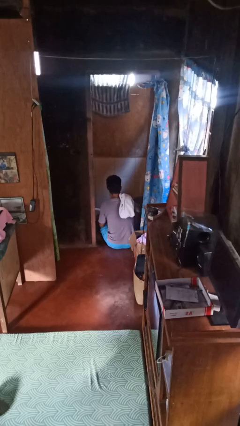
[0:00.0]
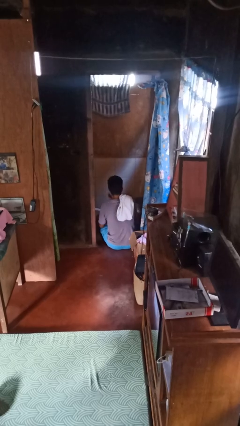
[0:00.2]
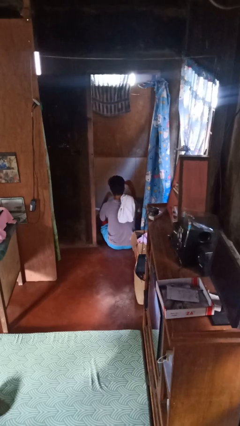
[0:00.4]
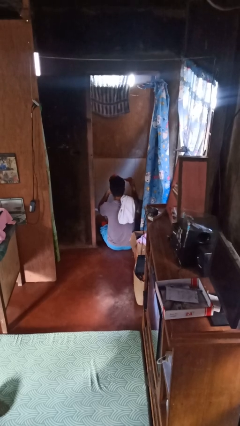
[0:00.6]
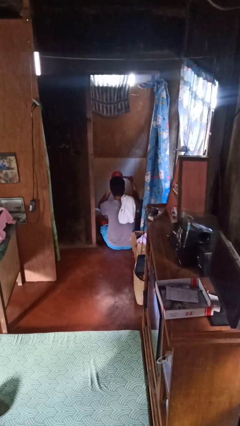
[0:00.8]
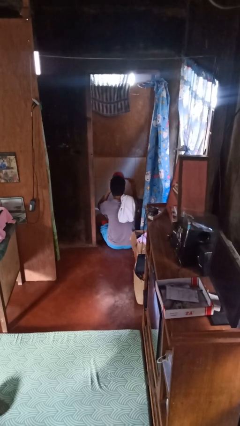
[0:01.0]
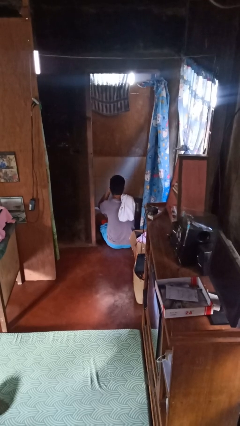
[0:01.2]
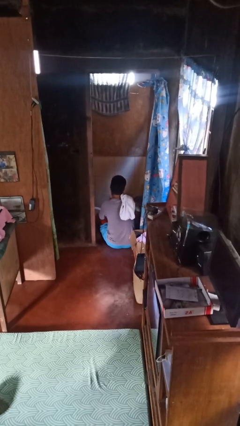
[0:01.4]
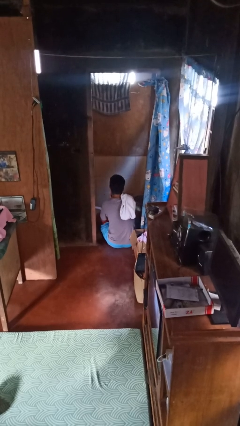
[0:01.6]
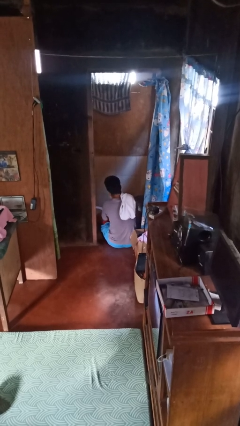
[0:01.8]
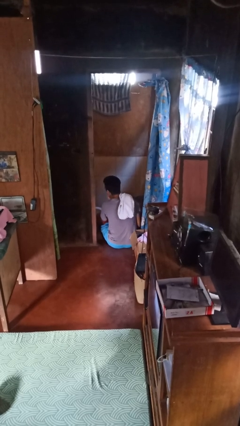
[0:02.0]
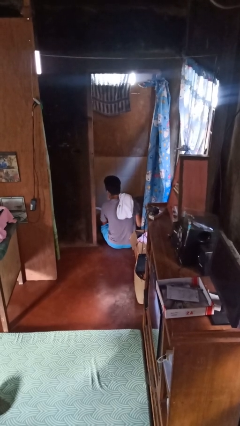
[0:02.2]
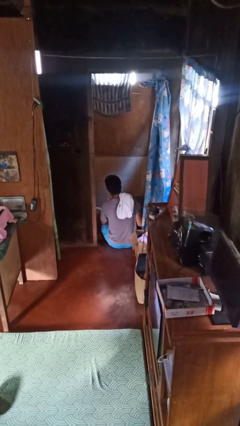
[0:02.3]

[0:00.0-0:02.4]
person washes face

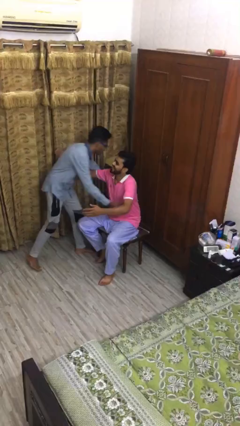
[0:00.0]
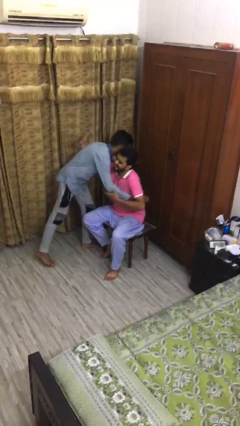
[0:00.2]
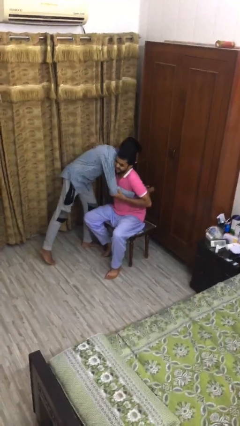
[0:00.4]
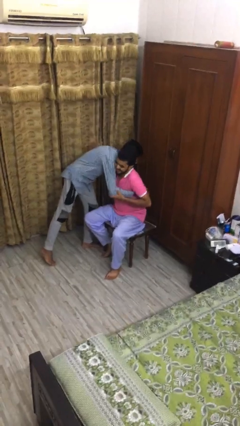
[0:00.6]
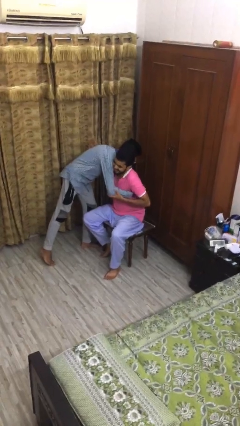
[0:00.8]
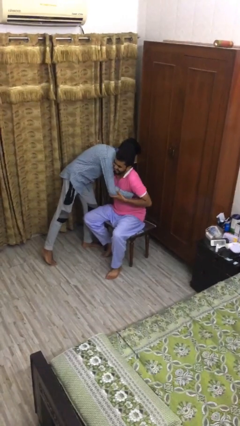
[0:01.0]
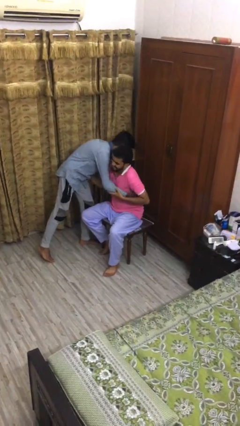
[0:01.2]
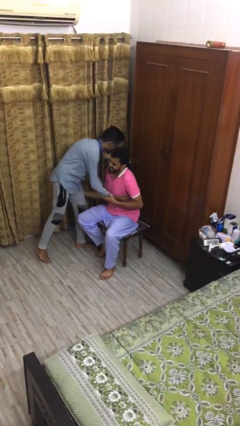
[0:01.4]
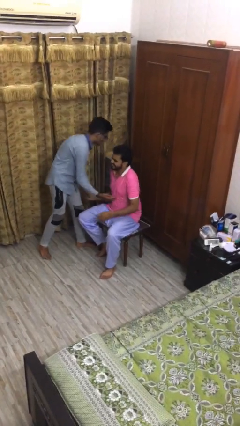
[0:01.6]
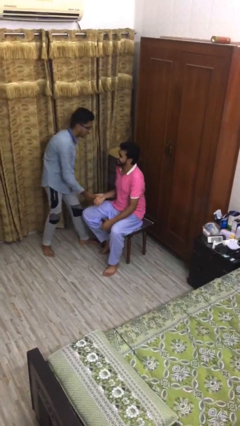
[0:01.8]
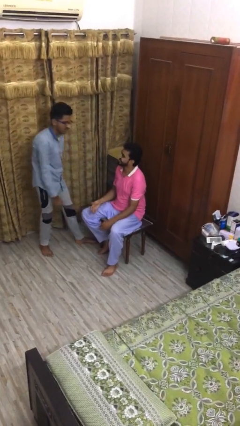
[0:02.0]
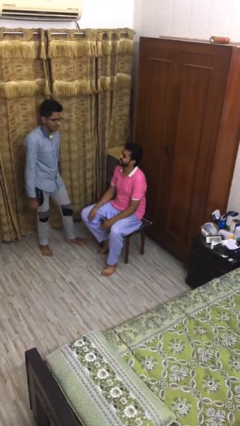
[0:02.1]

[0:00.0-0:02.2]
person embraces person

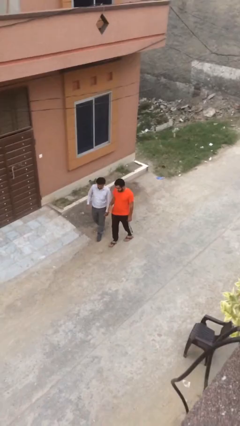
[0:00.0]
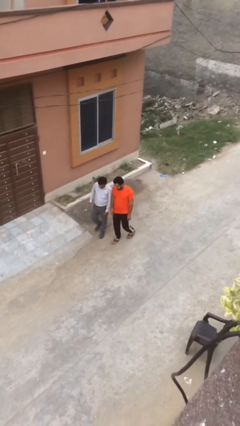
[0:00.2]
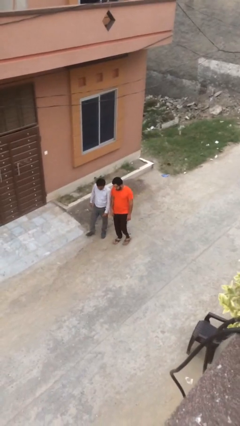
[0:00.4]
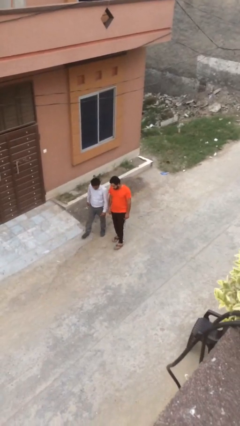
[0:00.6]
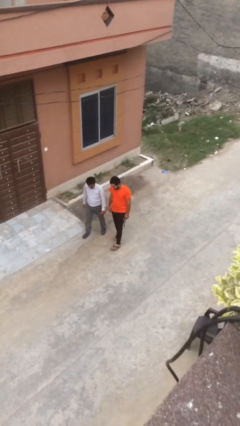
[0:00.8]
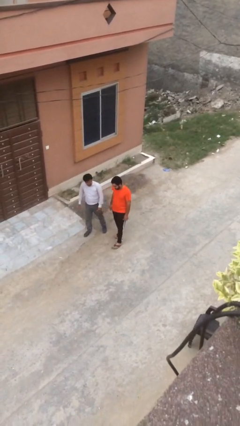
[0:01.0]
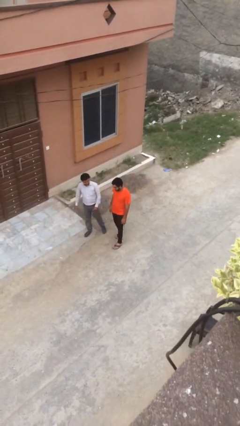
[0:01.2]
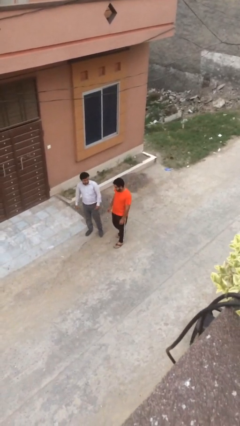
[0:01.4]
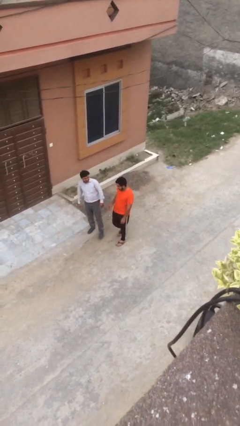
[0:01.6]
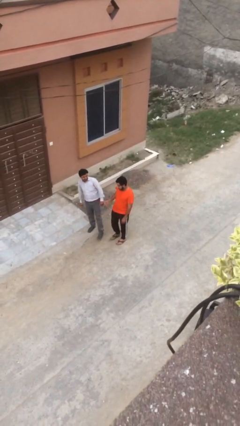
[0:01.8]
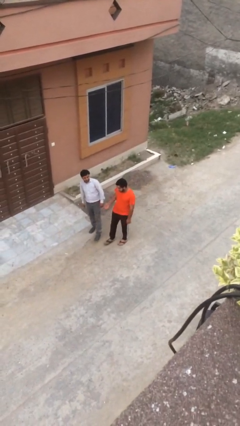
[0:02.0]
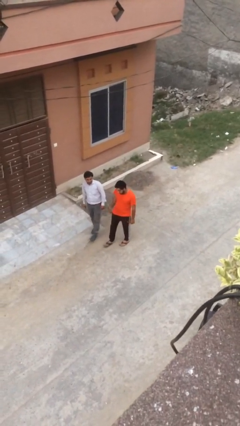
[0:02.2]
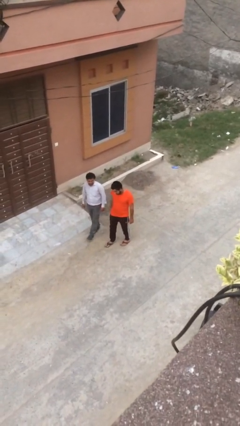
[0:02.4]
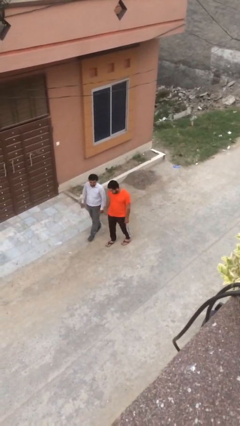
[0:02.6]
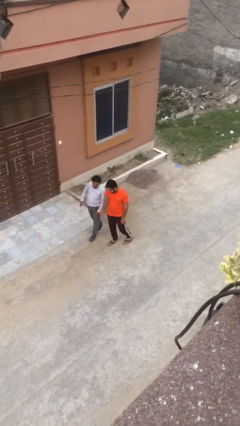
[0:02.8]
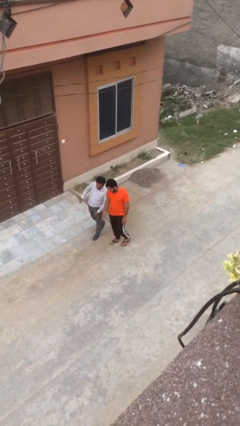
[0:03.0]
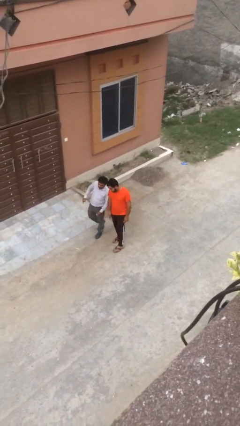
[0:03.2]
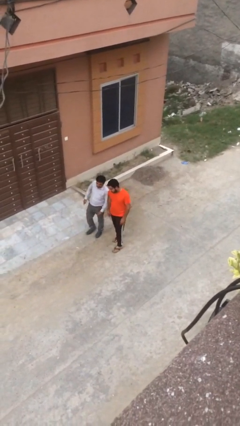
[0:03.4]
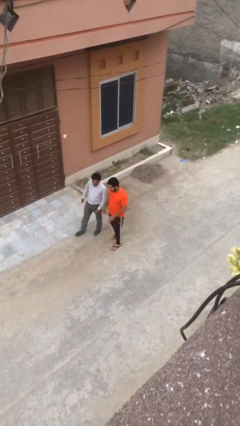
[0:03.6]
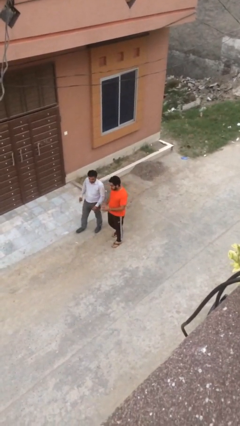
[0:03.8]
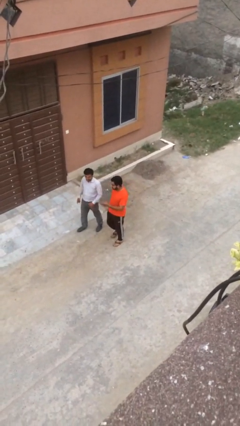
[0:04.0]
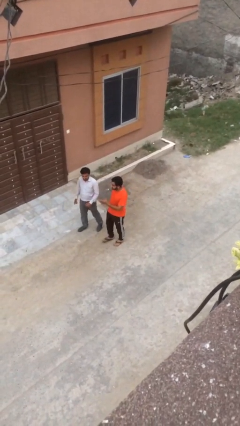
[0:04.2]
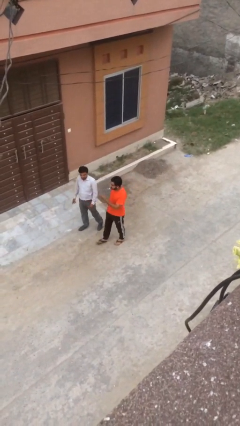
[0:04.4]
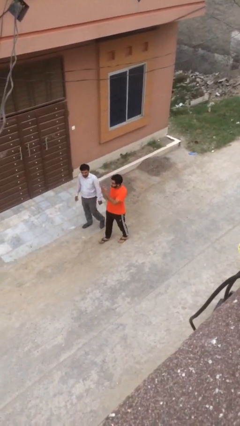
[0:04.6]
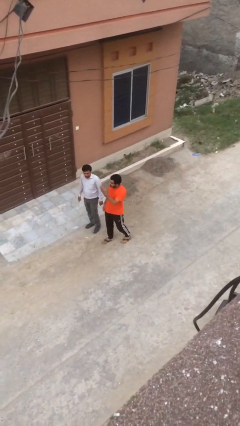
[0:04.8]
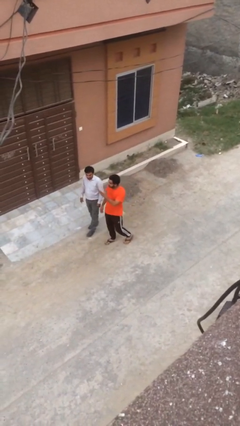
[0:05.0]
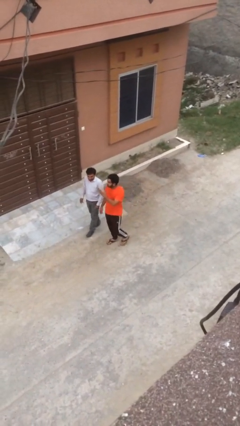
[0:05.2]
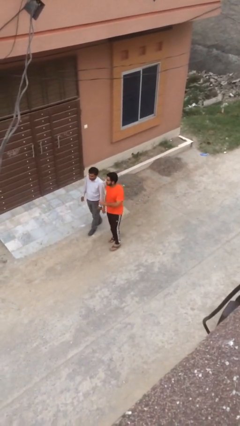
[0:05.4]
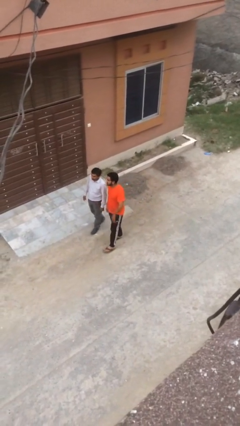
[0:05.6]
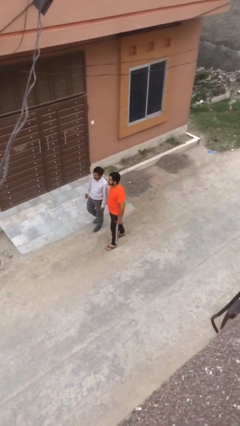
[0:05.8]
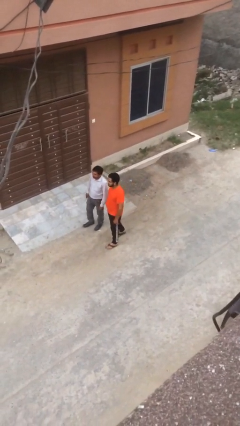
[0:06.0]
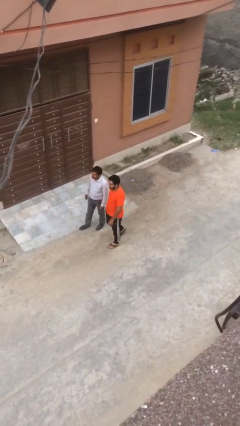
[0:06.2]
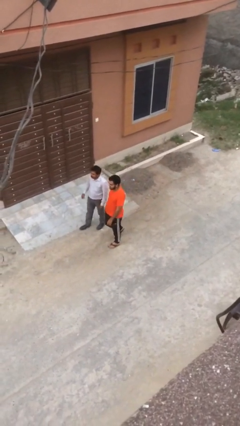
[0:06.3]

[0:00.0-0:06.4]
person talks to person

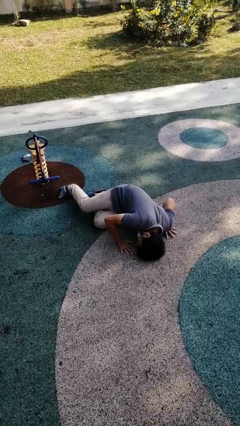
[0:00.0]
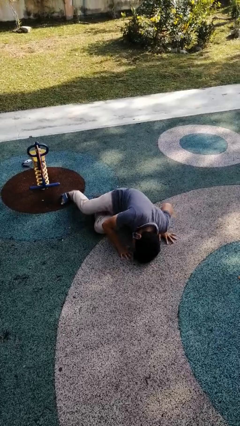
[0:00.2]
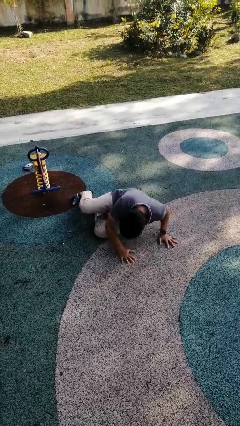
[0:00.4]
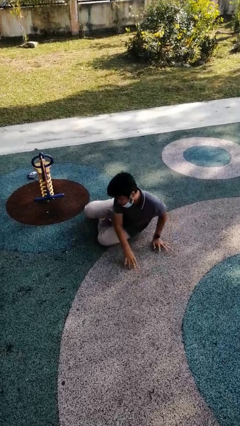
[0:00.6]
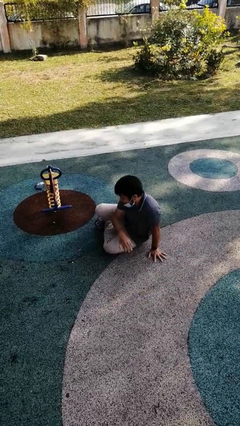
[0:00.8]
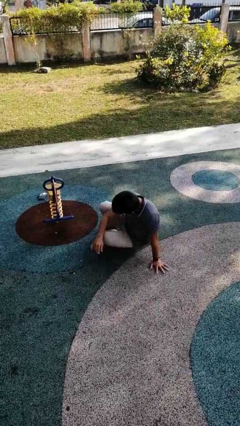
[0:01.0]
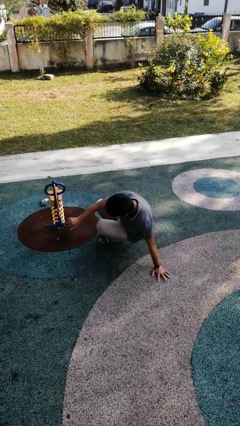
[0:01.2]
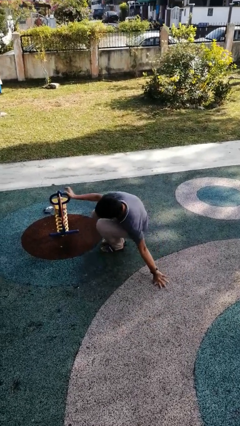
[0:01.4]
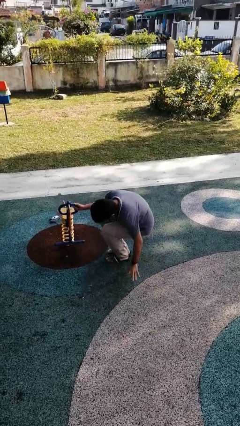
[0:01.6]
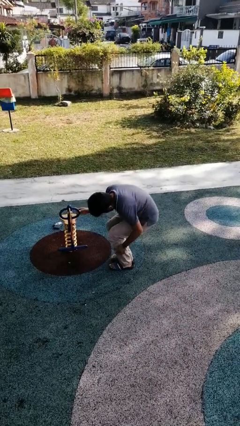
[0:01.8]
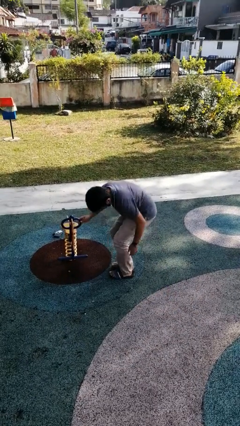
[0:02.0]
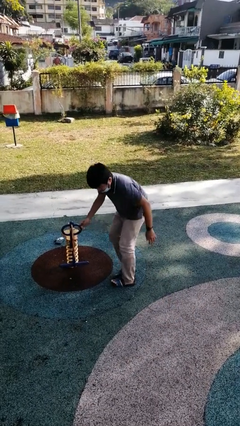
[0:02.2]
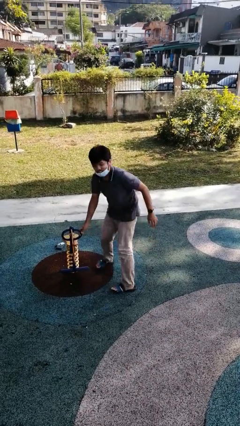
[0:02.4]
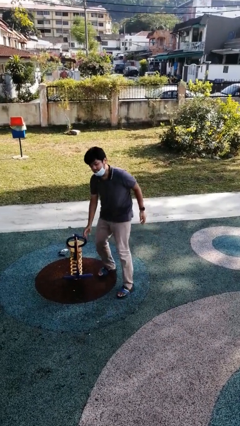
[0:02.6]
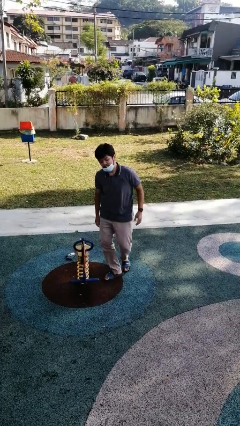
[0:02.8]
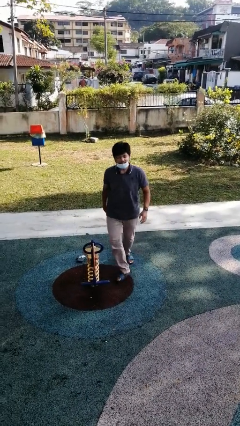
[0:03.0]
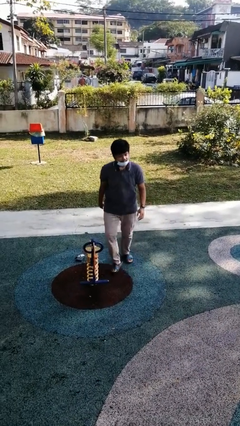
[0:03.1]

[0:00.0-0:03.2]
person stands up from floor

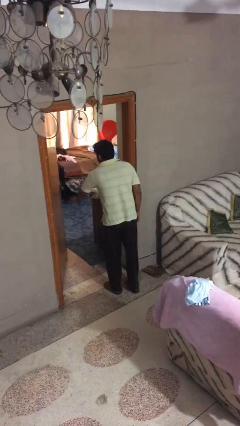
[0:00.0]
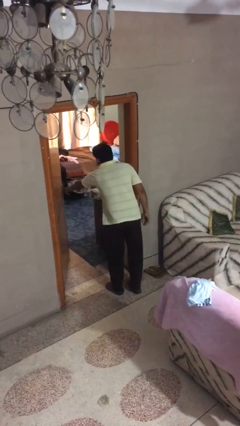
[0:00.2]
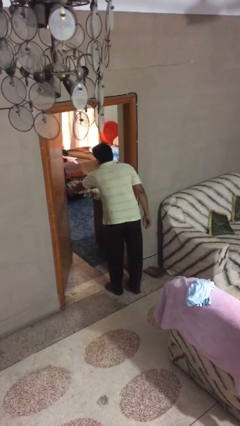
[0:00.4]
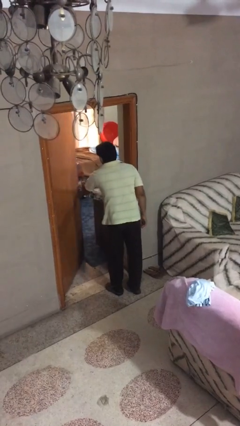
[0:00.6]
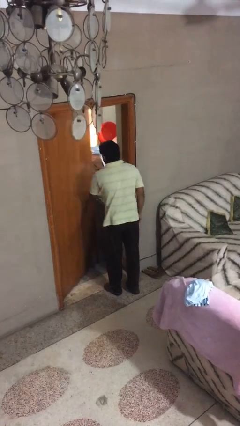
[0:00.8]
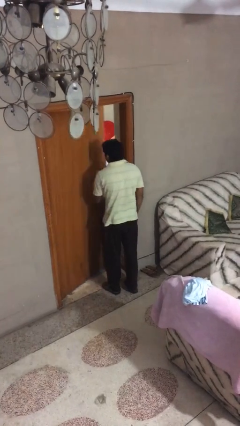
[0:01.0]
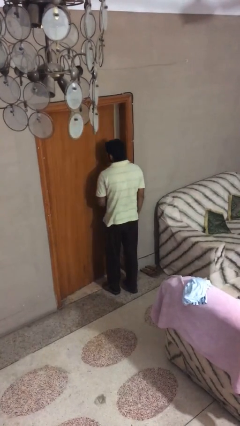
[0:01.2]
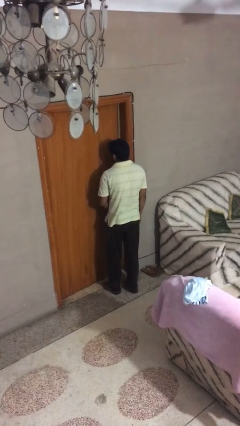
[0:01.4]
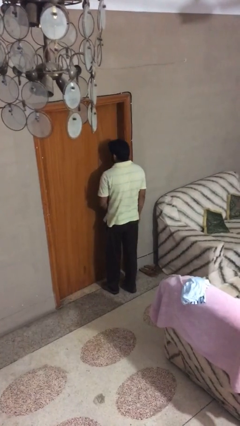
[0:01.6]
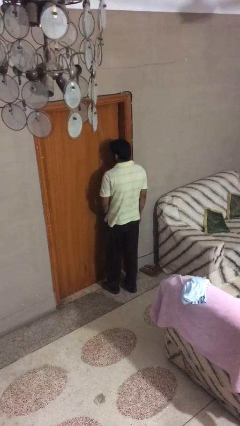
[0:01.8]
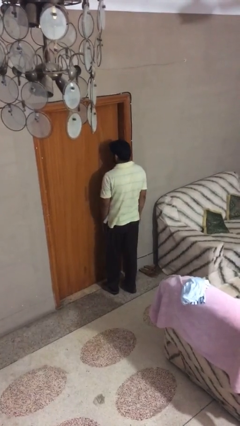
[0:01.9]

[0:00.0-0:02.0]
person closes facility door

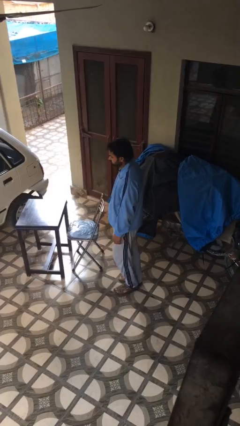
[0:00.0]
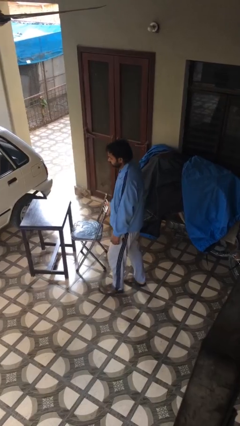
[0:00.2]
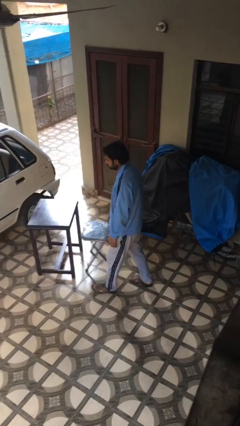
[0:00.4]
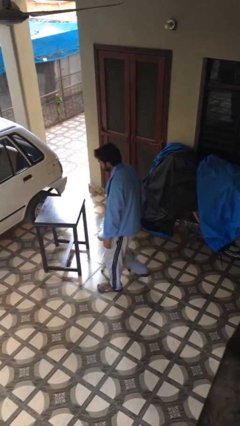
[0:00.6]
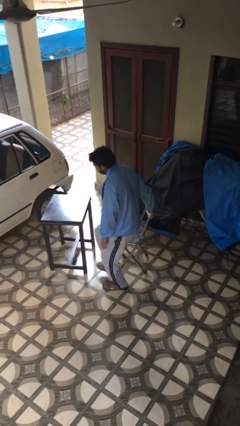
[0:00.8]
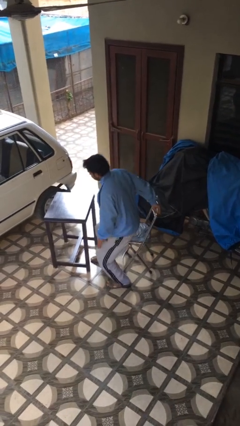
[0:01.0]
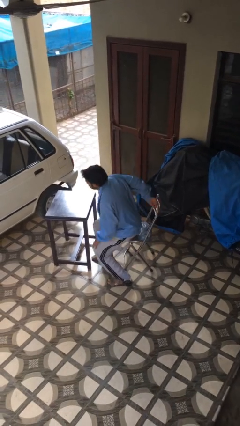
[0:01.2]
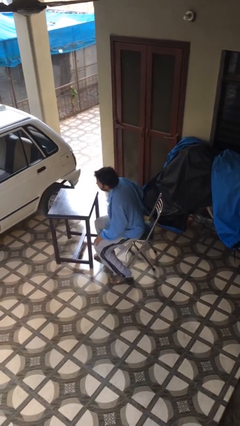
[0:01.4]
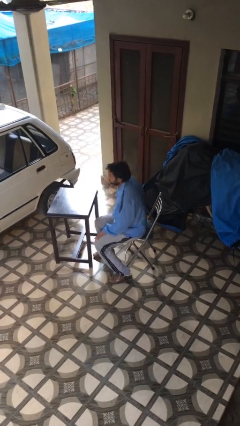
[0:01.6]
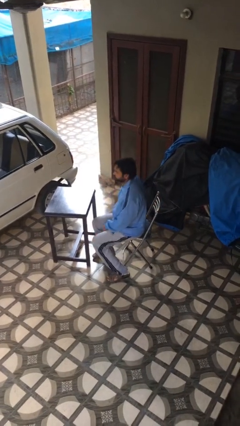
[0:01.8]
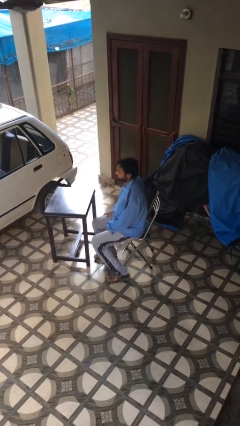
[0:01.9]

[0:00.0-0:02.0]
person sits down
